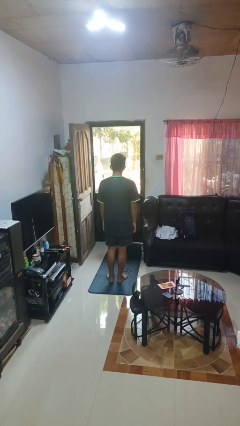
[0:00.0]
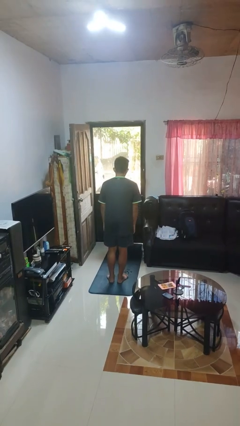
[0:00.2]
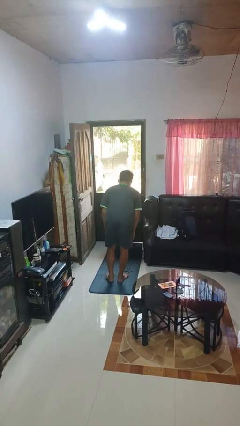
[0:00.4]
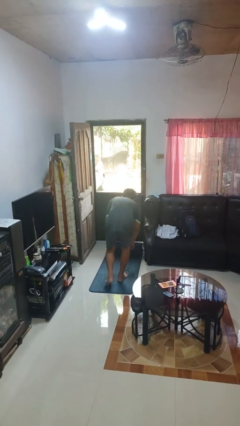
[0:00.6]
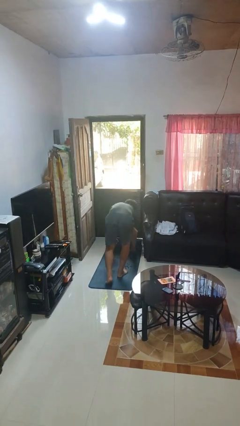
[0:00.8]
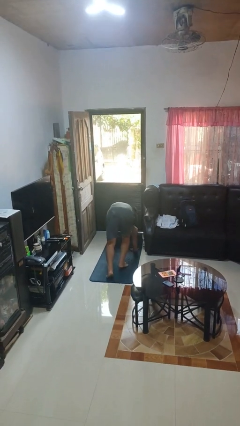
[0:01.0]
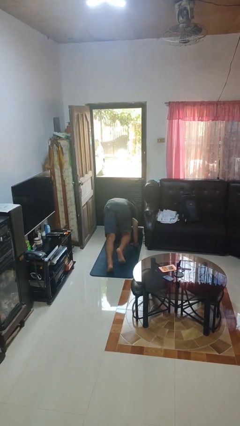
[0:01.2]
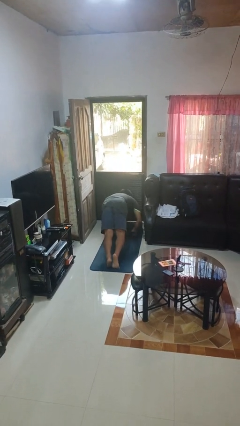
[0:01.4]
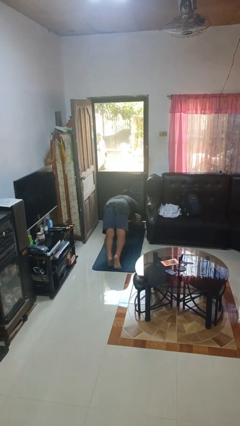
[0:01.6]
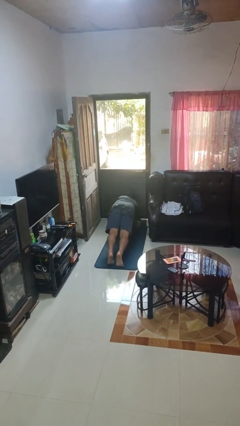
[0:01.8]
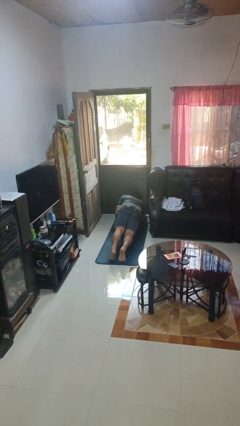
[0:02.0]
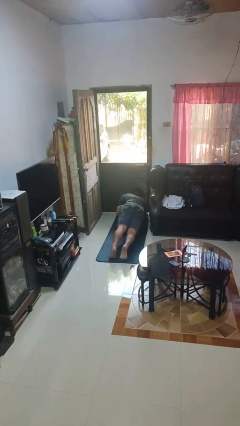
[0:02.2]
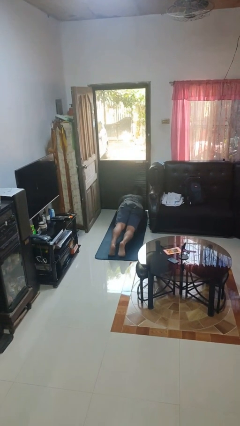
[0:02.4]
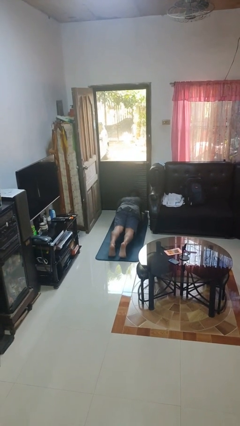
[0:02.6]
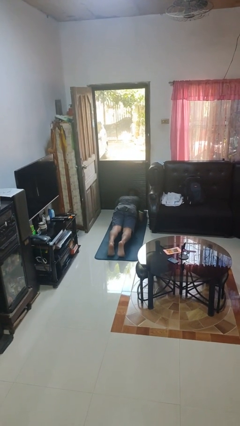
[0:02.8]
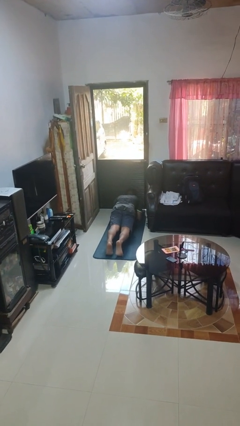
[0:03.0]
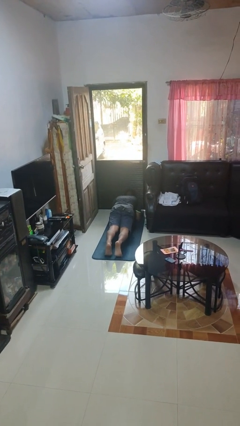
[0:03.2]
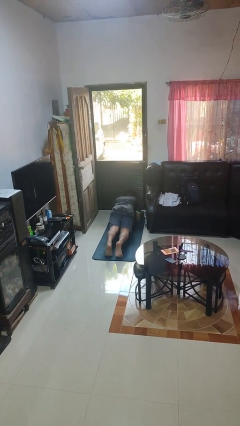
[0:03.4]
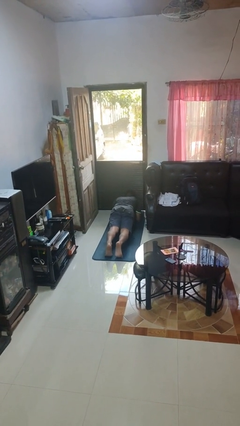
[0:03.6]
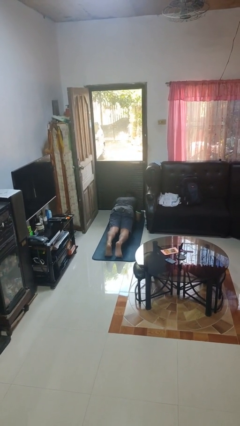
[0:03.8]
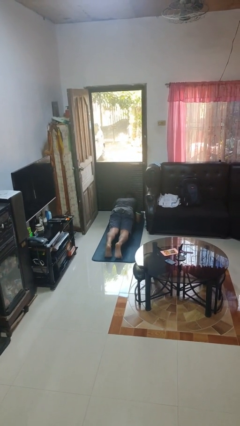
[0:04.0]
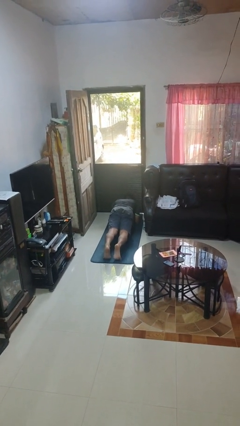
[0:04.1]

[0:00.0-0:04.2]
person exercises with plank

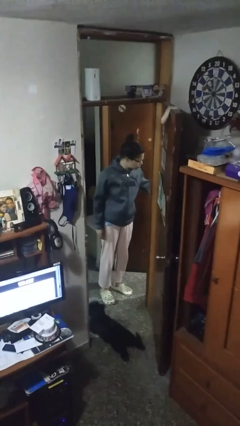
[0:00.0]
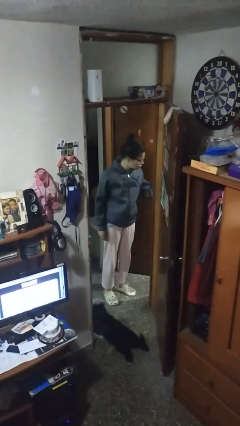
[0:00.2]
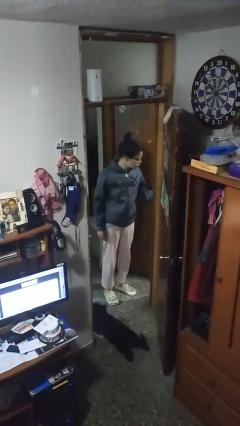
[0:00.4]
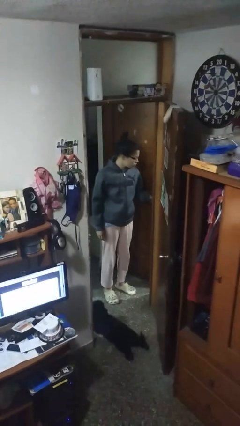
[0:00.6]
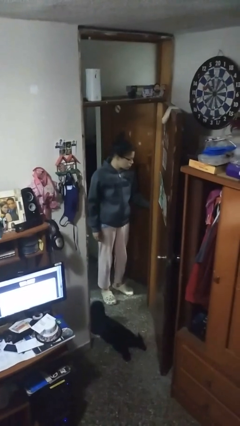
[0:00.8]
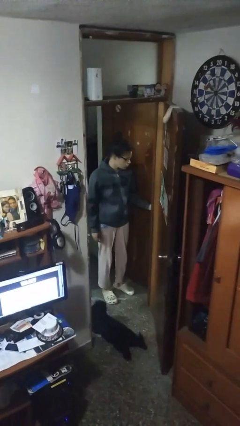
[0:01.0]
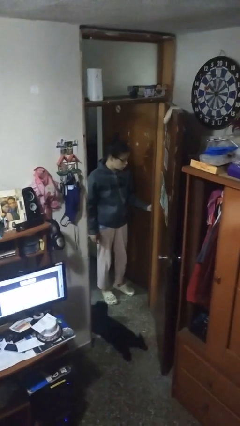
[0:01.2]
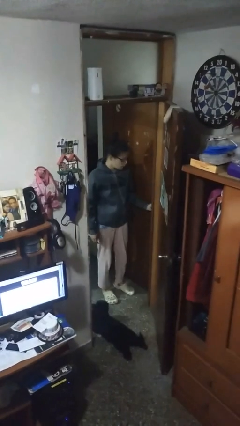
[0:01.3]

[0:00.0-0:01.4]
person closes facility door

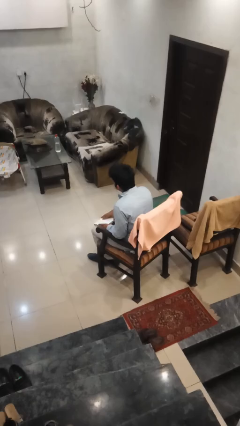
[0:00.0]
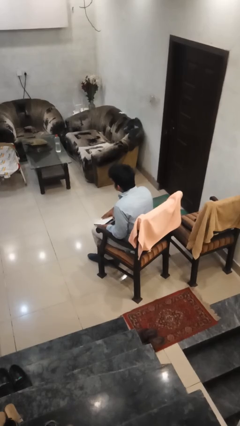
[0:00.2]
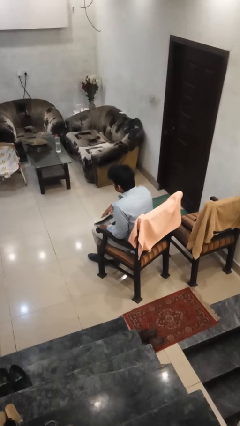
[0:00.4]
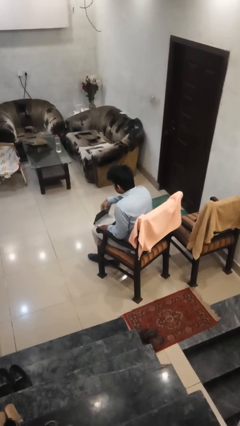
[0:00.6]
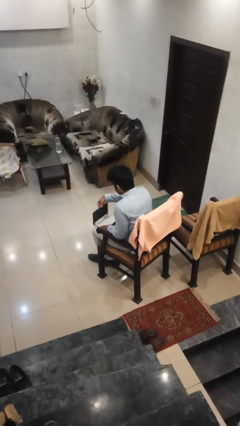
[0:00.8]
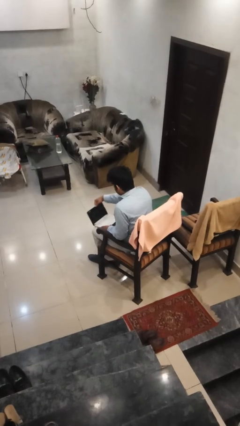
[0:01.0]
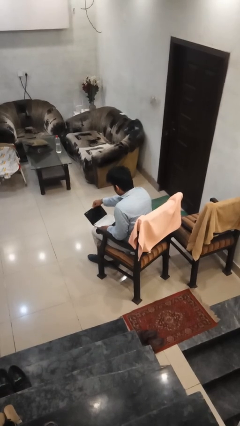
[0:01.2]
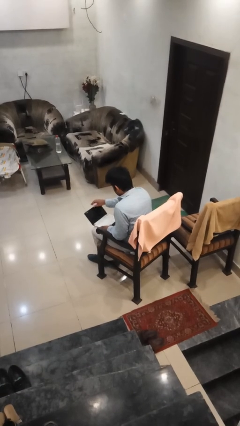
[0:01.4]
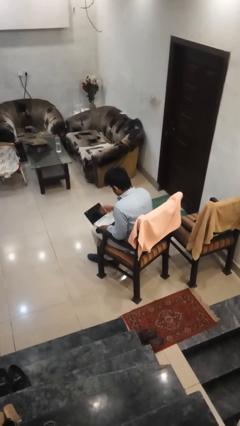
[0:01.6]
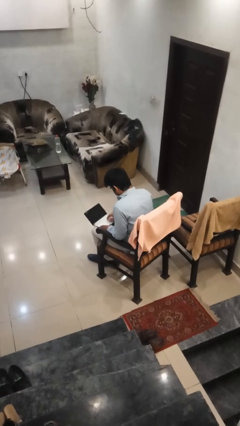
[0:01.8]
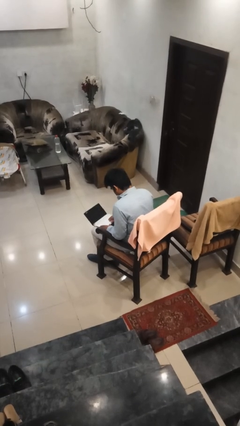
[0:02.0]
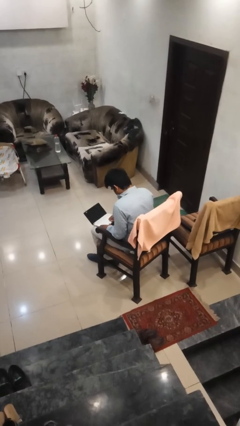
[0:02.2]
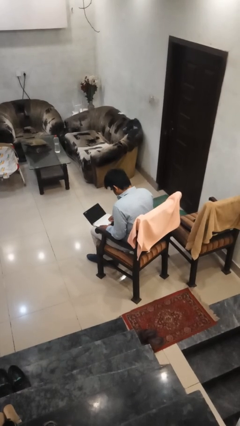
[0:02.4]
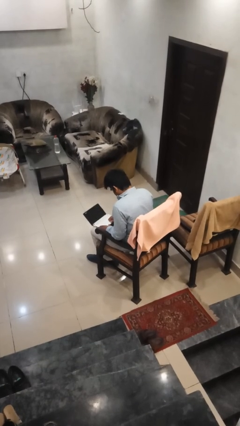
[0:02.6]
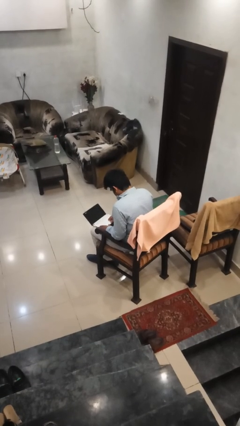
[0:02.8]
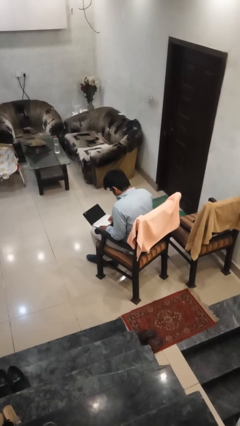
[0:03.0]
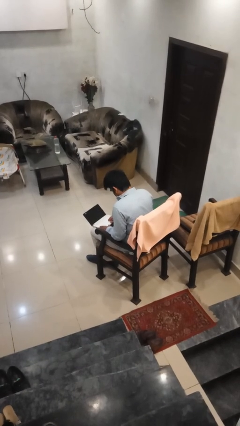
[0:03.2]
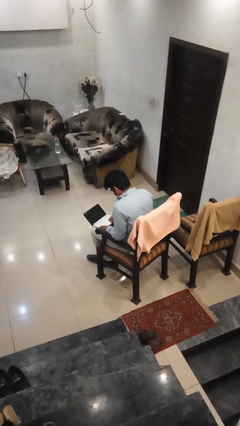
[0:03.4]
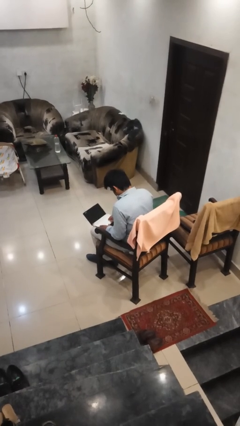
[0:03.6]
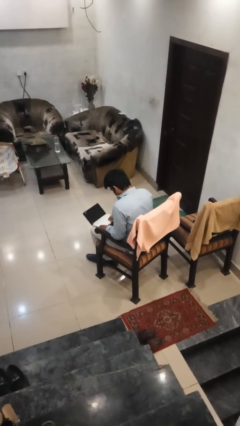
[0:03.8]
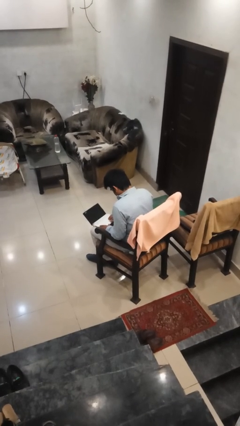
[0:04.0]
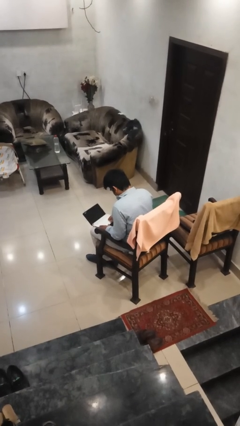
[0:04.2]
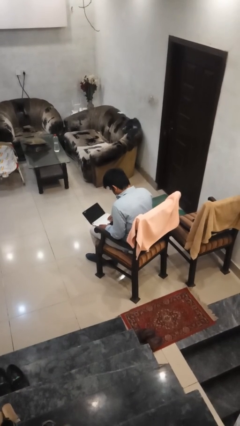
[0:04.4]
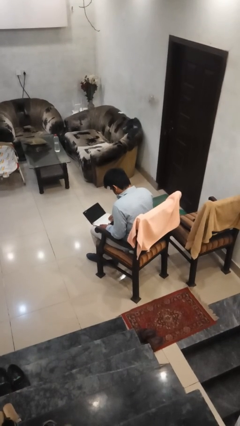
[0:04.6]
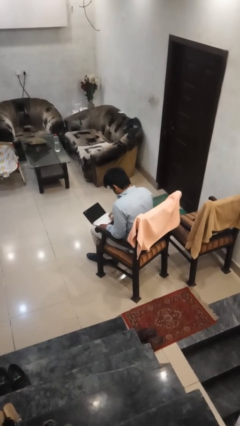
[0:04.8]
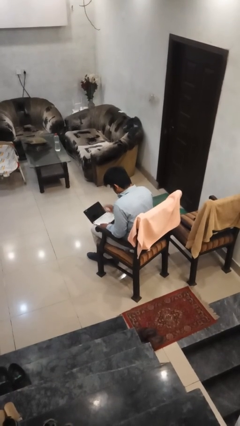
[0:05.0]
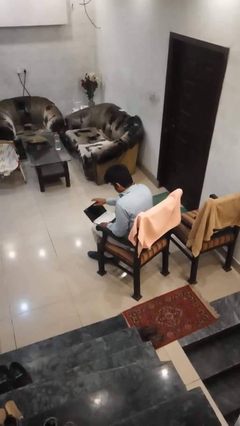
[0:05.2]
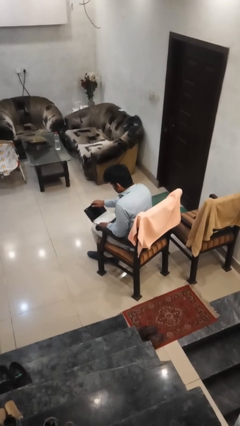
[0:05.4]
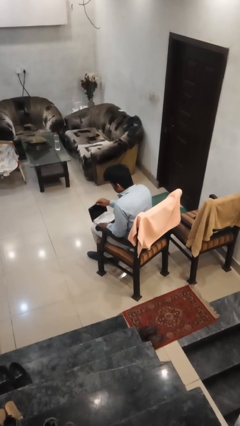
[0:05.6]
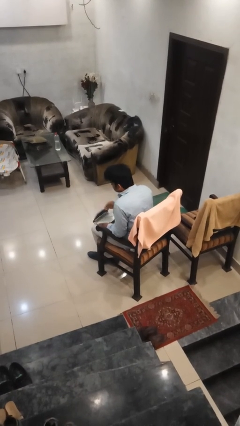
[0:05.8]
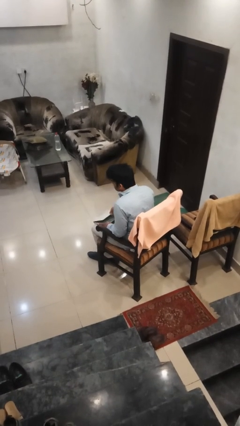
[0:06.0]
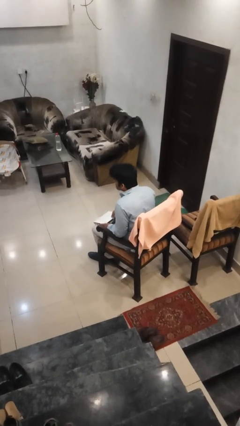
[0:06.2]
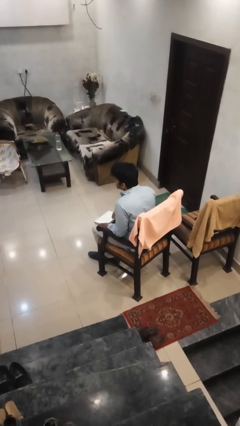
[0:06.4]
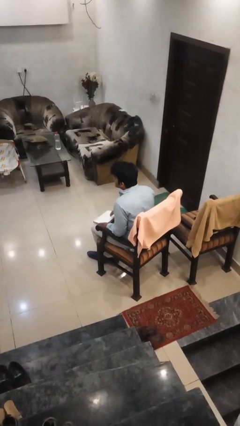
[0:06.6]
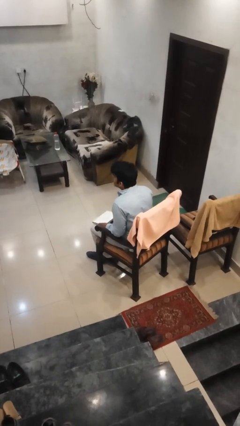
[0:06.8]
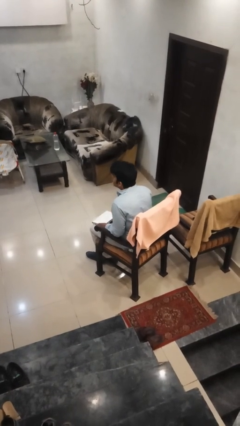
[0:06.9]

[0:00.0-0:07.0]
person interacts with laptop

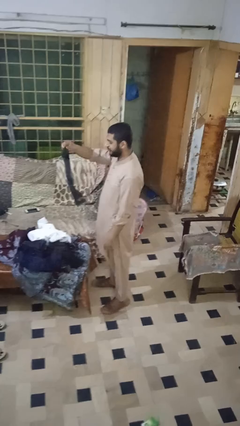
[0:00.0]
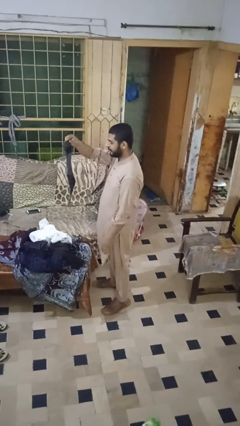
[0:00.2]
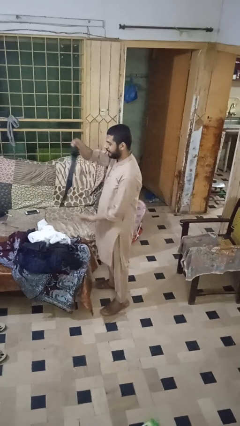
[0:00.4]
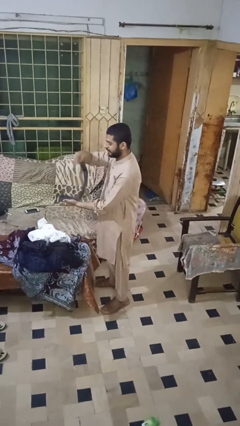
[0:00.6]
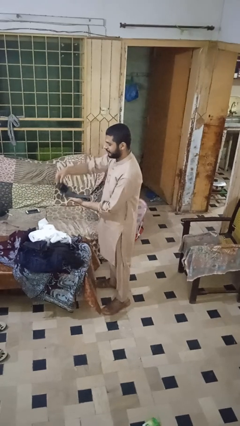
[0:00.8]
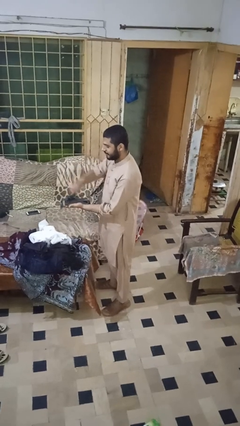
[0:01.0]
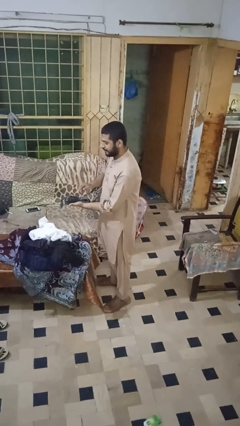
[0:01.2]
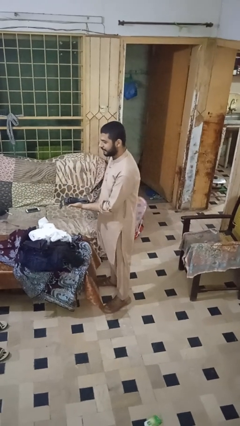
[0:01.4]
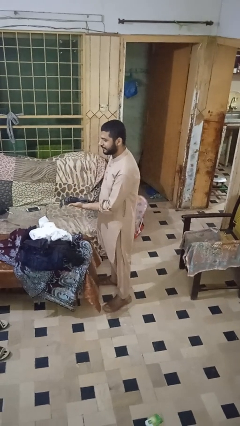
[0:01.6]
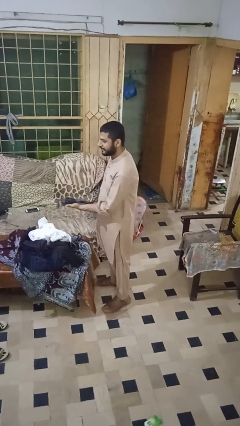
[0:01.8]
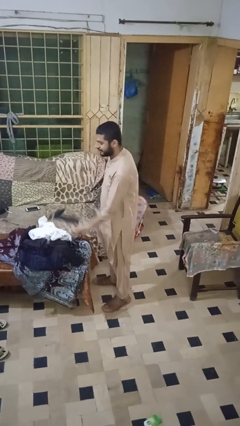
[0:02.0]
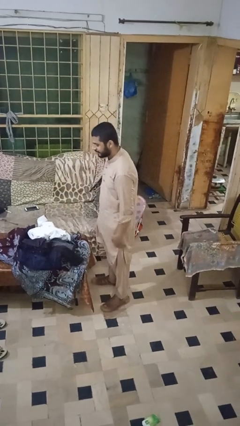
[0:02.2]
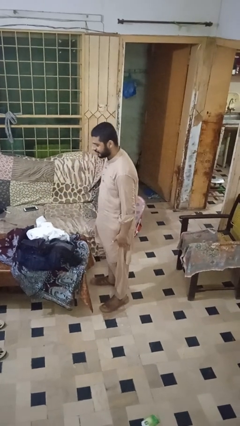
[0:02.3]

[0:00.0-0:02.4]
person folds socks

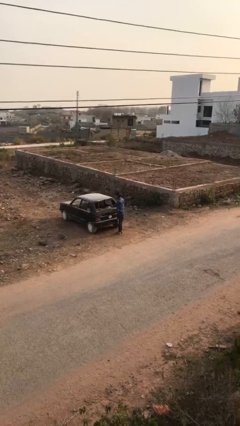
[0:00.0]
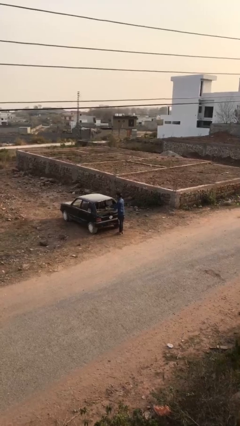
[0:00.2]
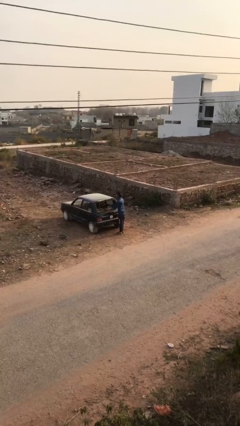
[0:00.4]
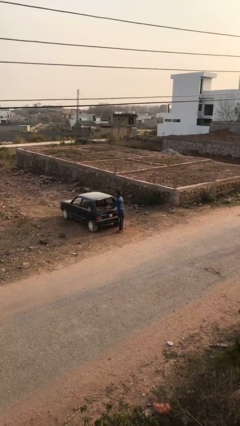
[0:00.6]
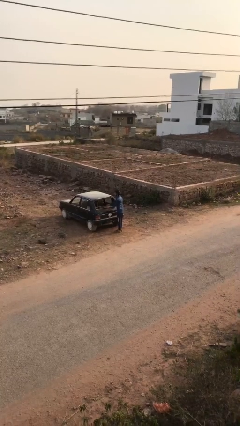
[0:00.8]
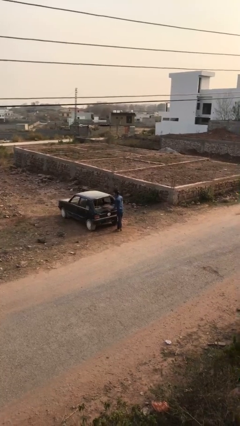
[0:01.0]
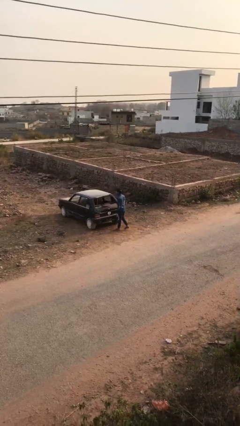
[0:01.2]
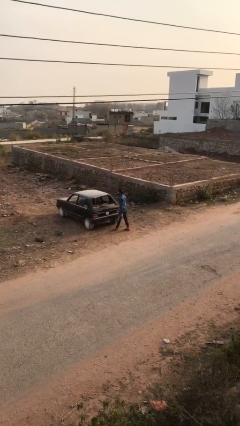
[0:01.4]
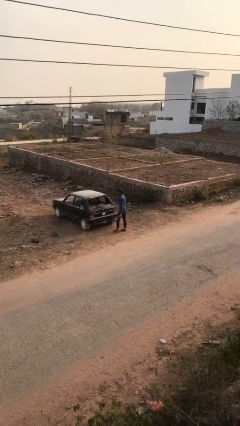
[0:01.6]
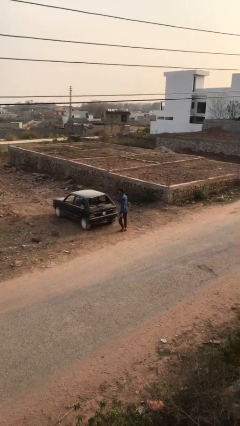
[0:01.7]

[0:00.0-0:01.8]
person loads car

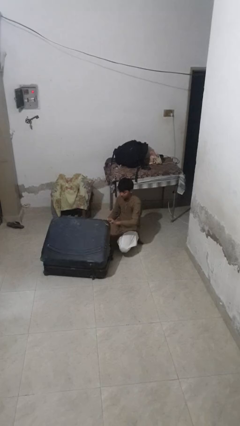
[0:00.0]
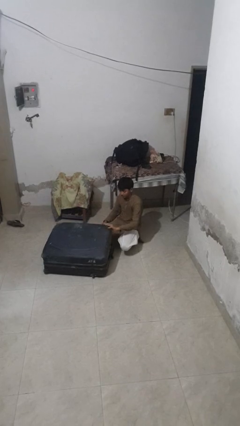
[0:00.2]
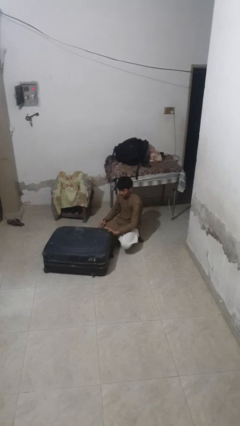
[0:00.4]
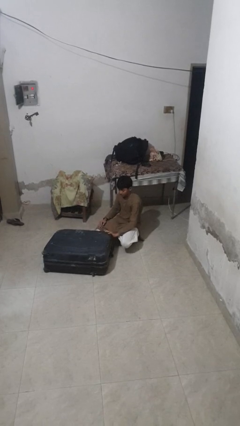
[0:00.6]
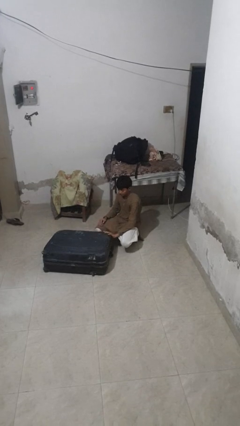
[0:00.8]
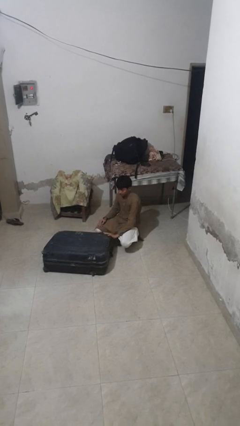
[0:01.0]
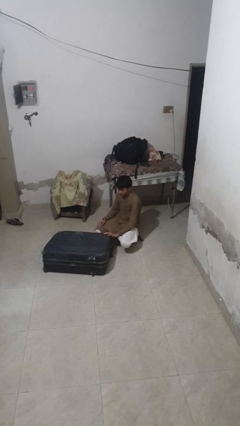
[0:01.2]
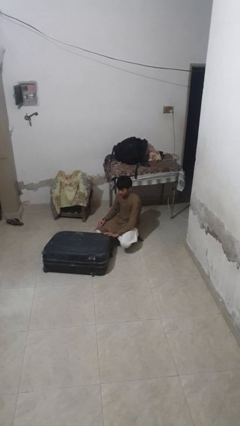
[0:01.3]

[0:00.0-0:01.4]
person closes suitcase
